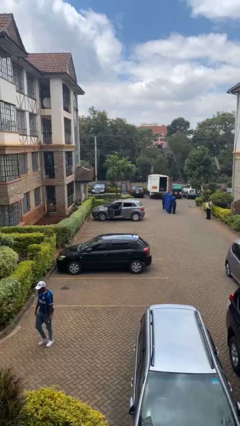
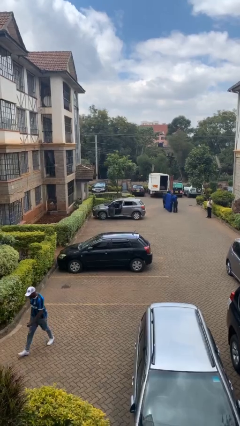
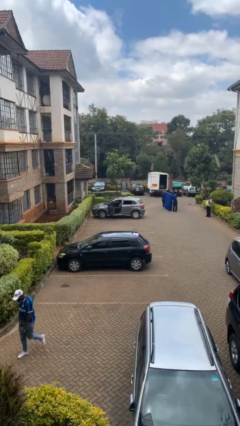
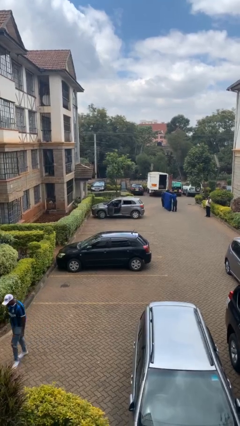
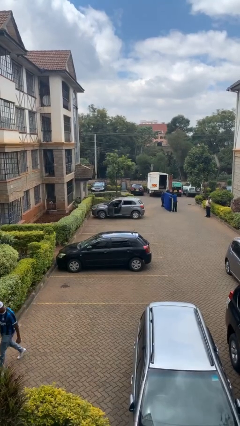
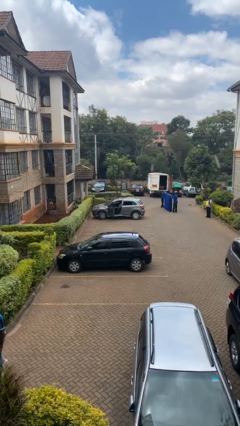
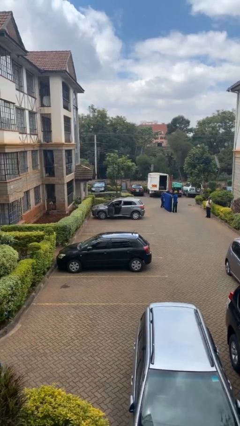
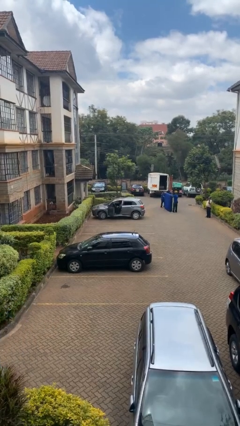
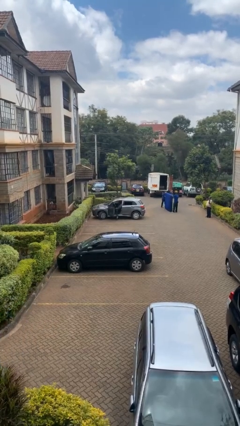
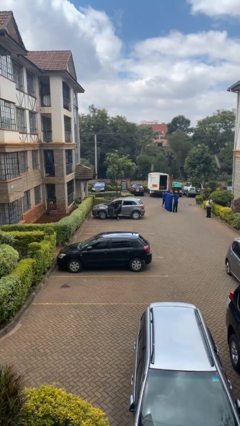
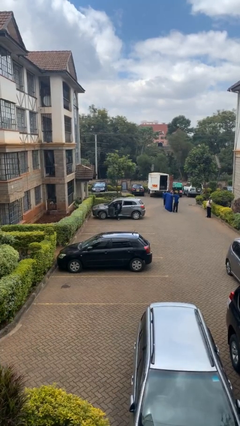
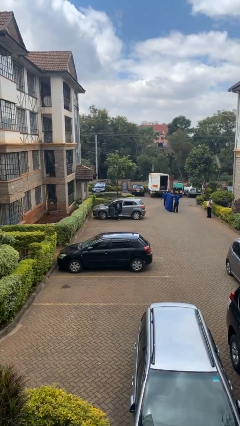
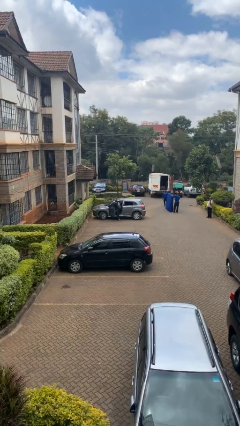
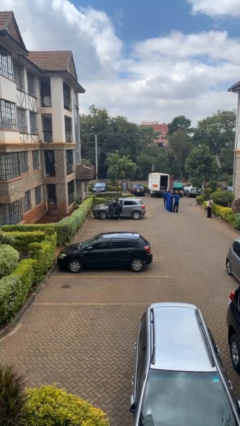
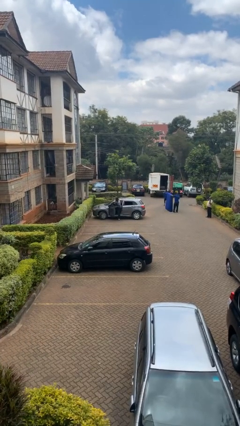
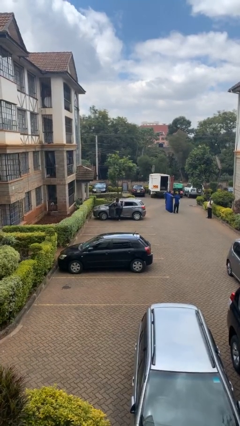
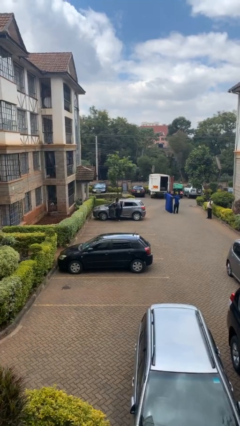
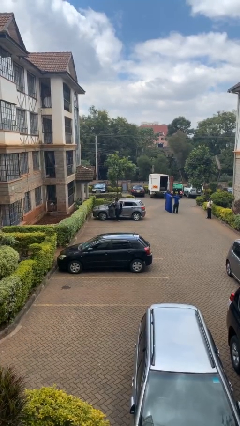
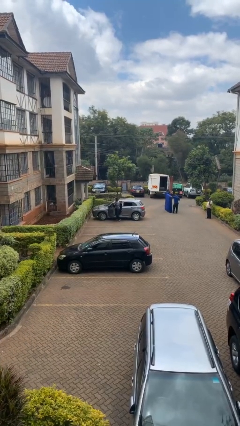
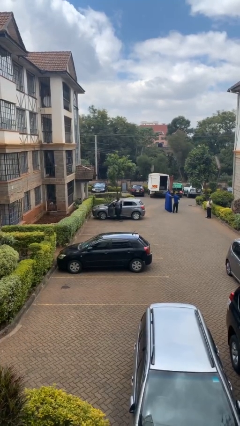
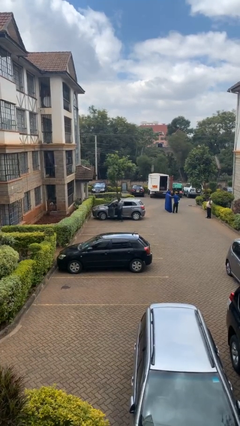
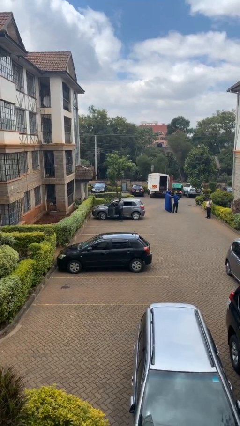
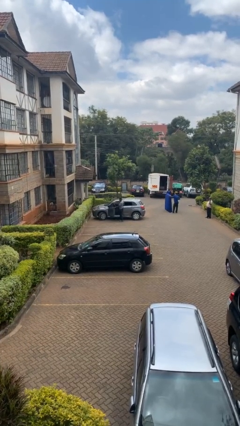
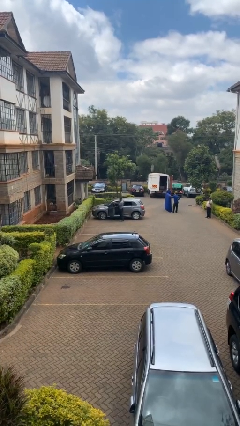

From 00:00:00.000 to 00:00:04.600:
person exits car

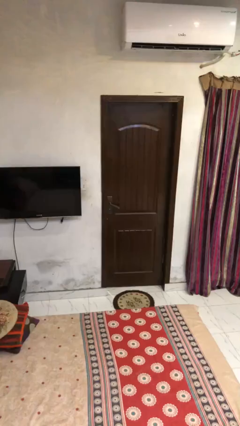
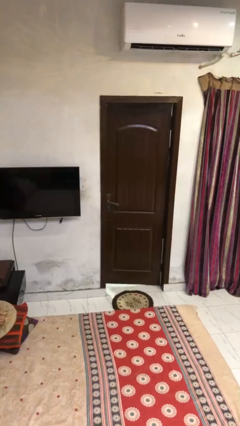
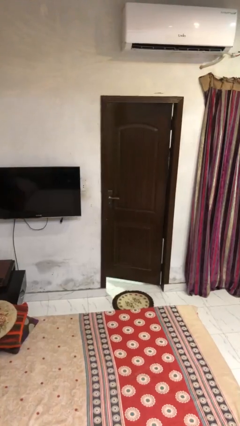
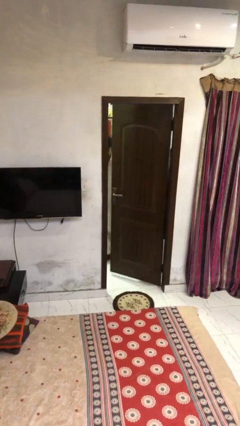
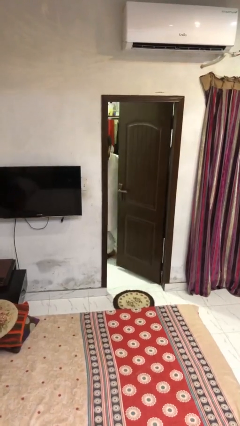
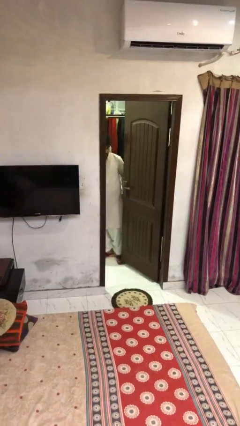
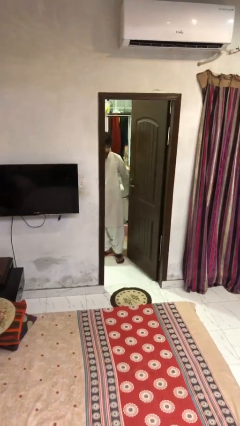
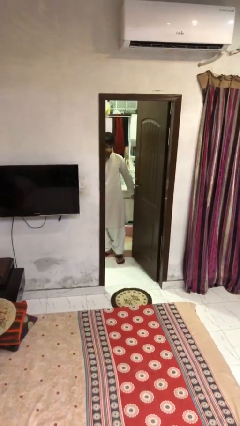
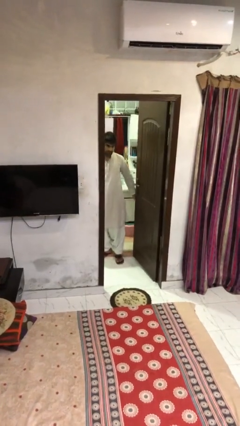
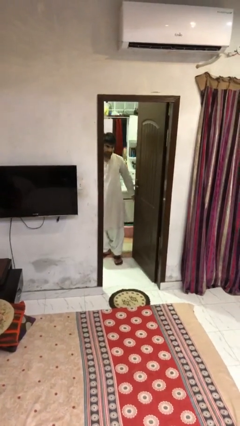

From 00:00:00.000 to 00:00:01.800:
person opens facility door

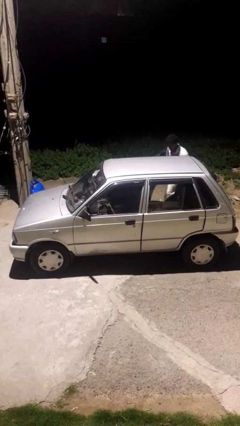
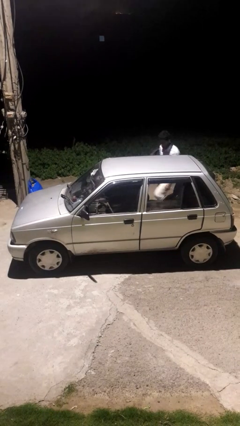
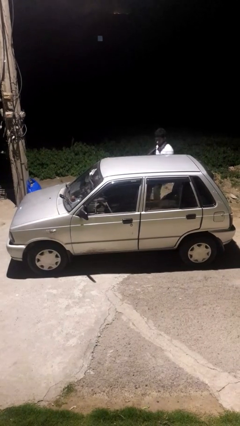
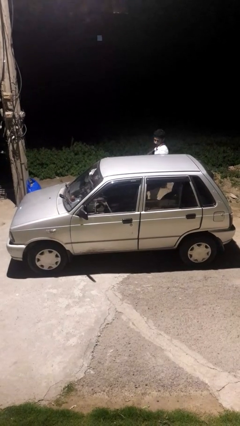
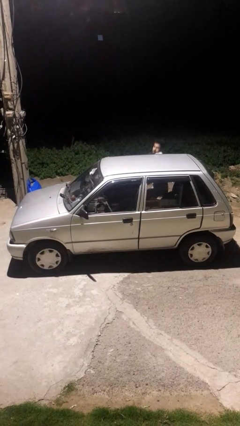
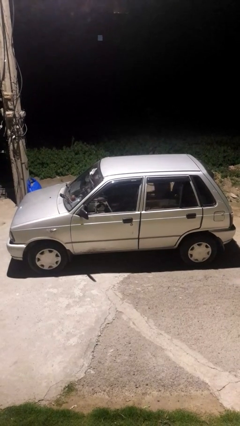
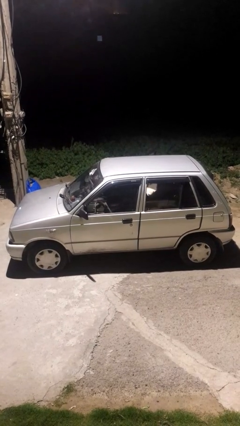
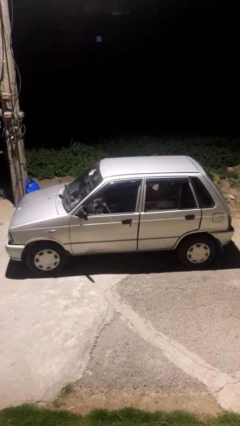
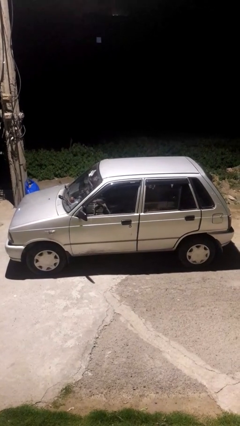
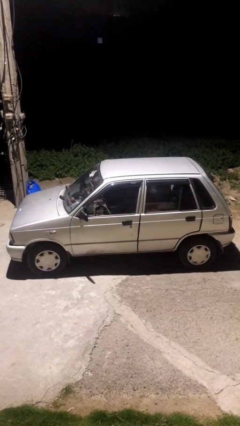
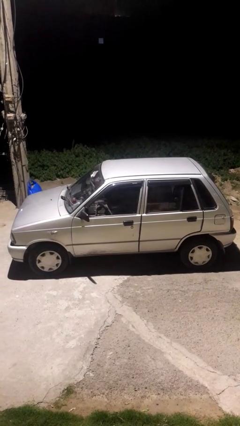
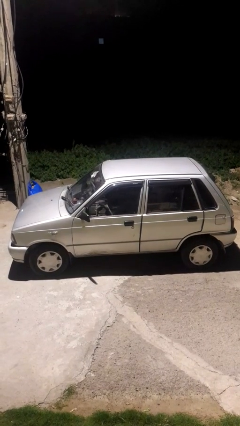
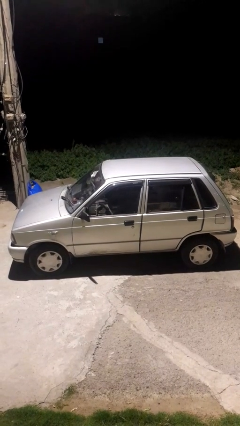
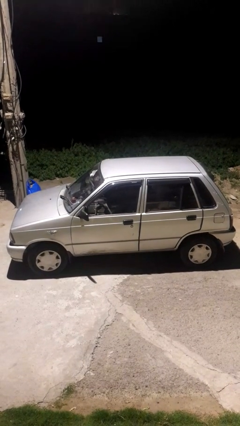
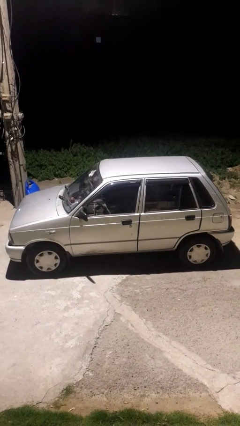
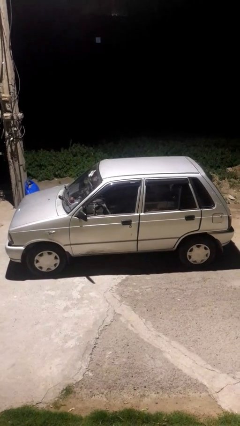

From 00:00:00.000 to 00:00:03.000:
car picks up person

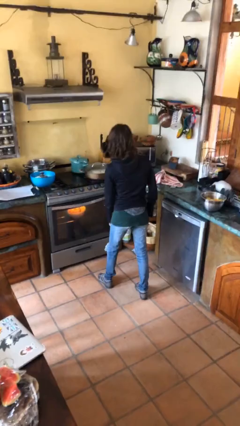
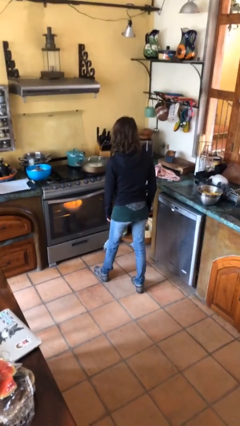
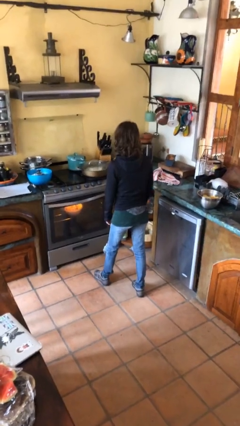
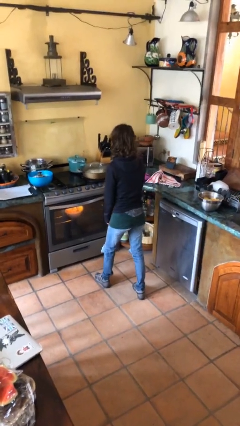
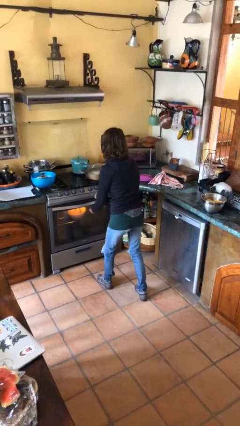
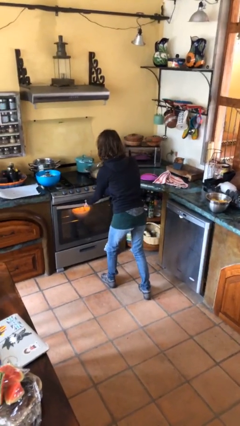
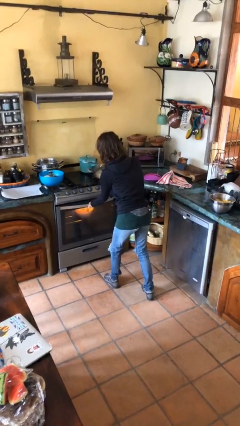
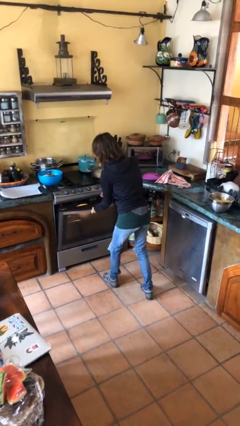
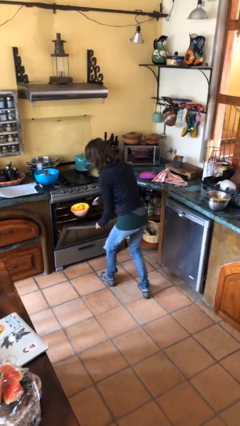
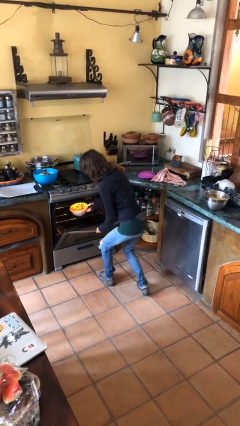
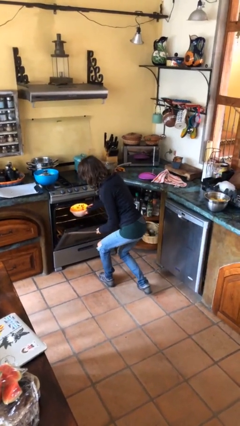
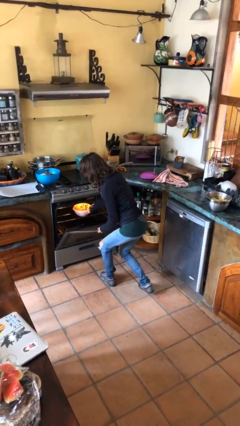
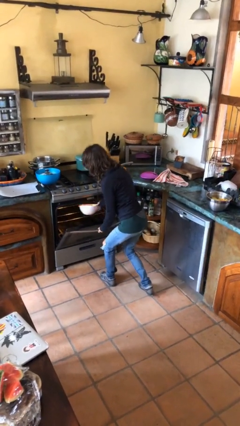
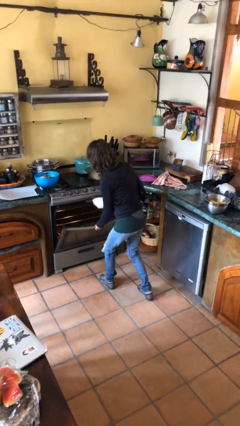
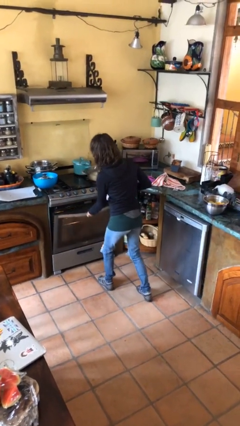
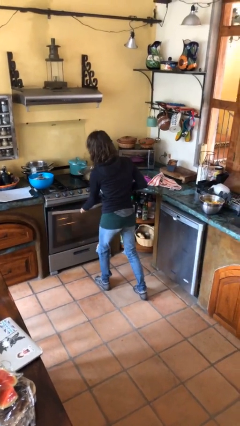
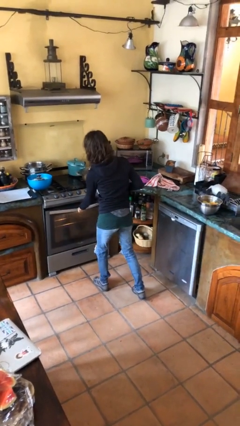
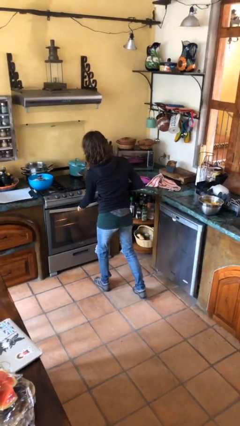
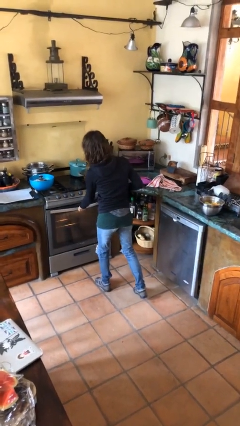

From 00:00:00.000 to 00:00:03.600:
person takes object from oven

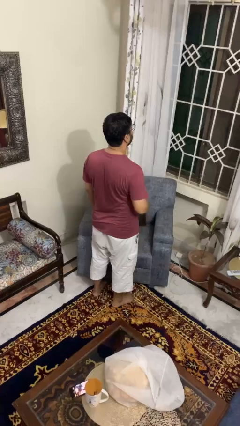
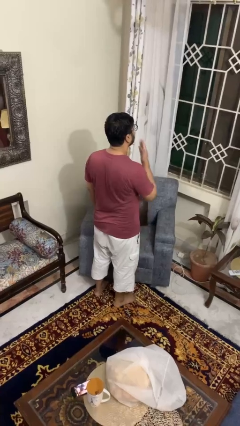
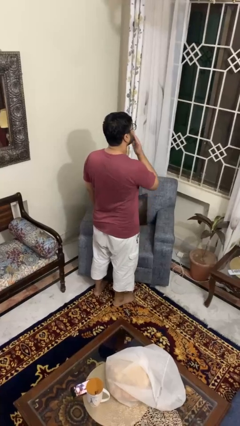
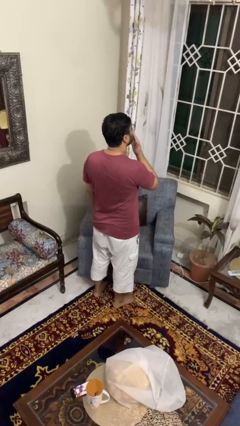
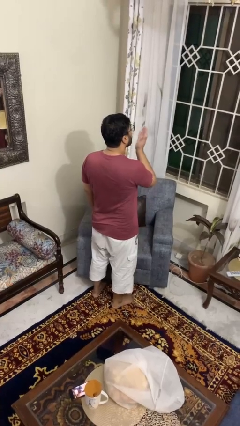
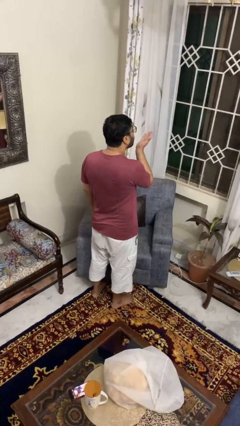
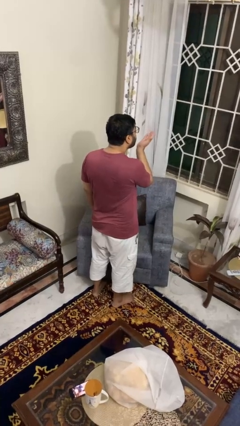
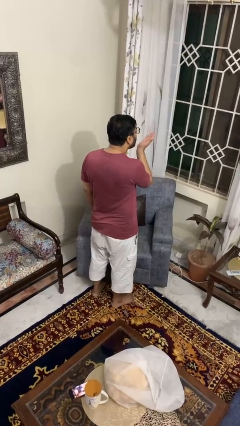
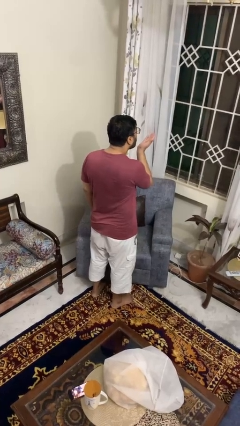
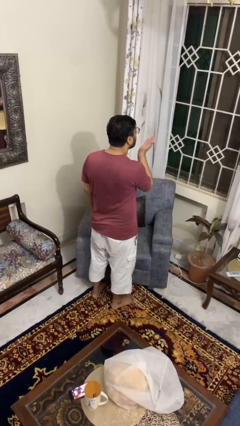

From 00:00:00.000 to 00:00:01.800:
person gestures blow kiss

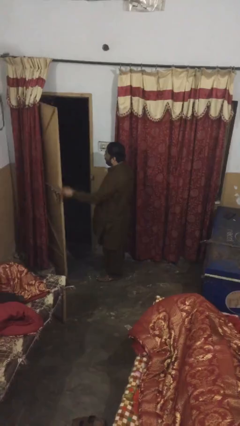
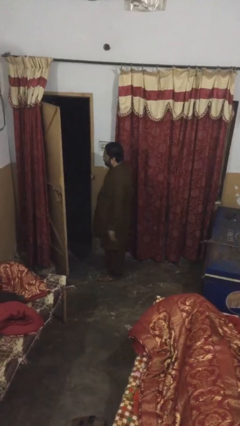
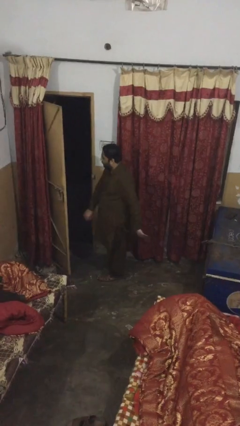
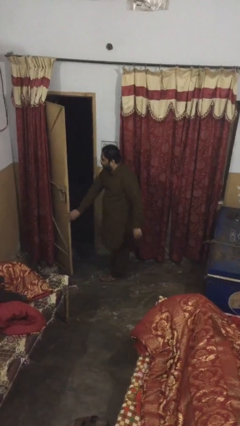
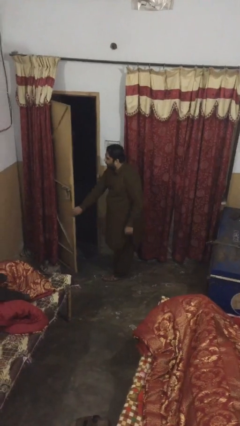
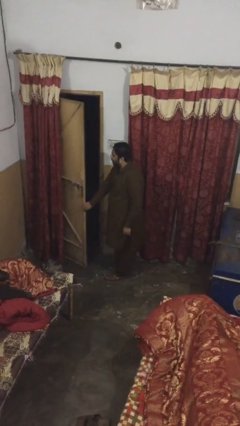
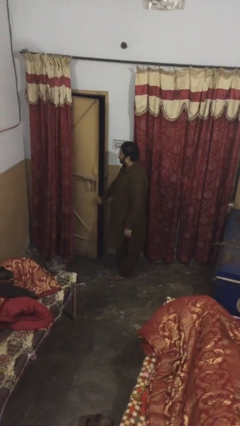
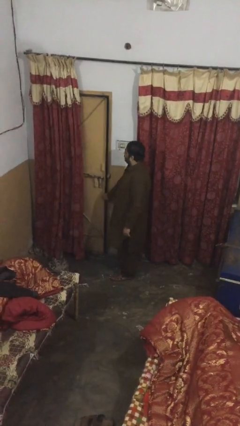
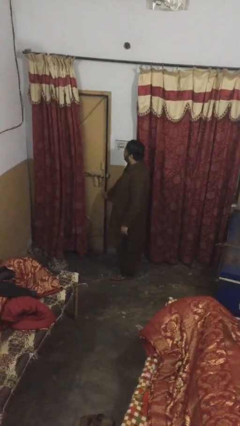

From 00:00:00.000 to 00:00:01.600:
person closes facility door

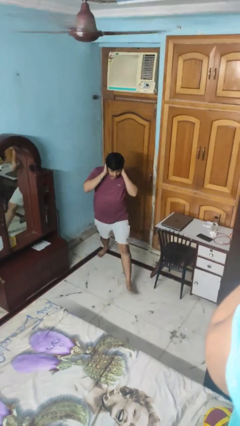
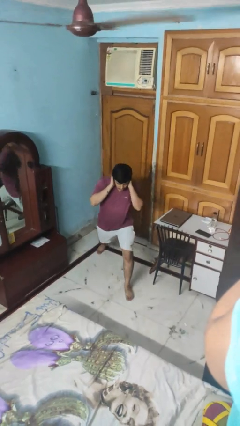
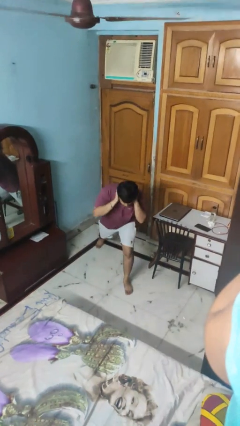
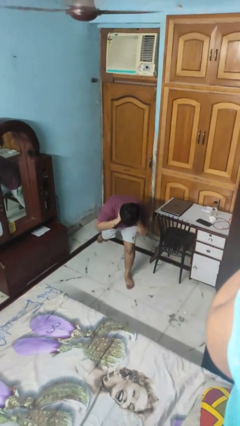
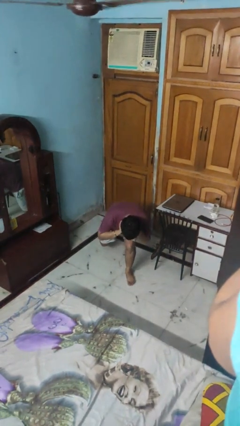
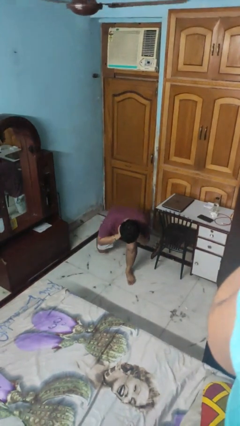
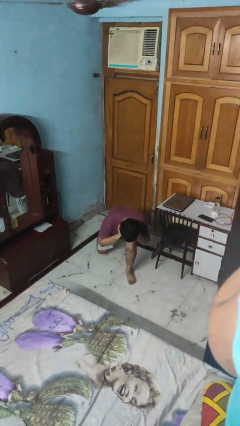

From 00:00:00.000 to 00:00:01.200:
person exercises with lunges
